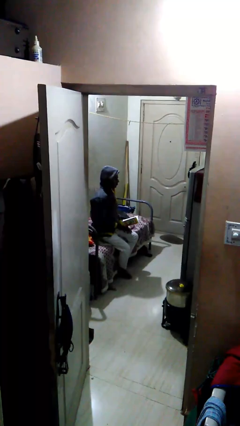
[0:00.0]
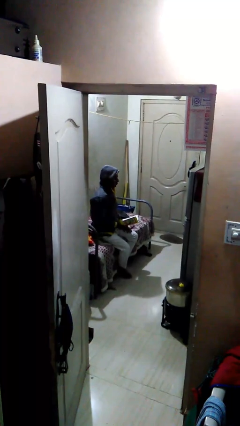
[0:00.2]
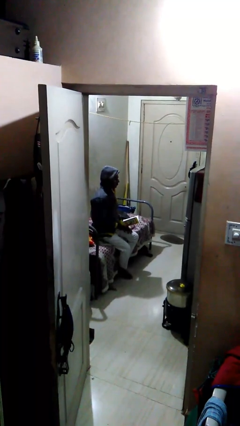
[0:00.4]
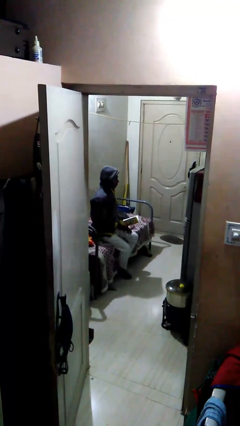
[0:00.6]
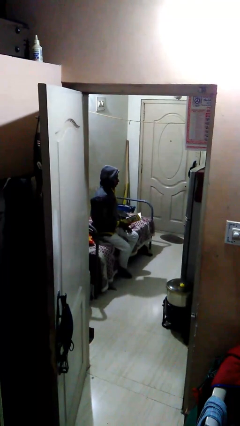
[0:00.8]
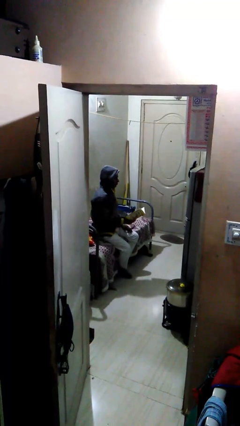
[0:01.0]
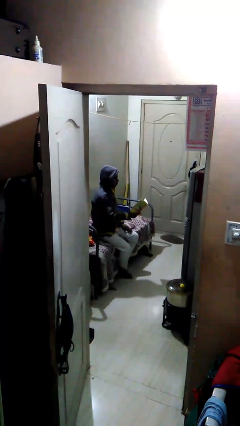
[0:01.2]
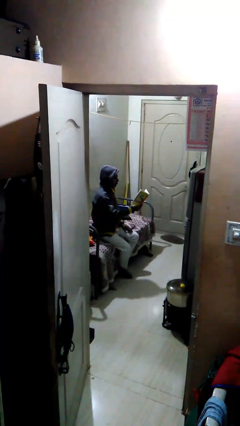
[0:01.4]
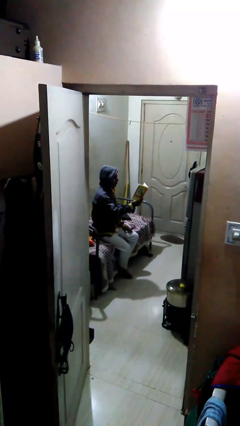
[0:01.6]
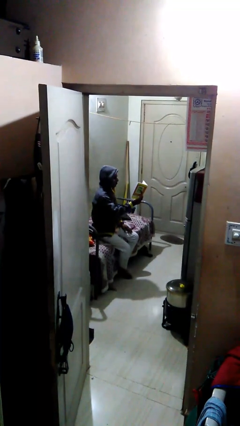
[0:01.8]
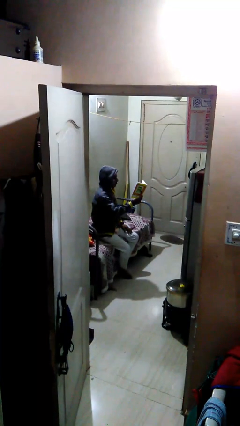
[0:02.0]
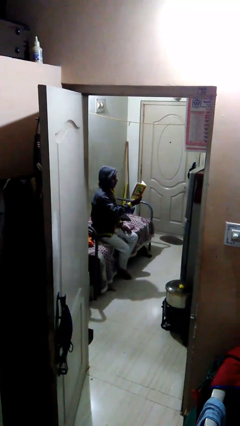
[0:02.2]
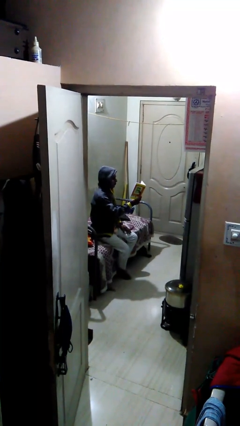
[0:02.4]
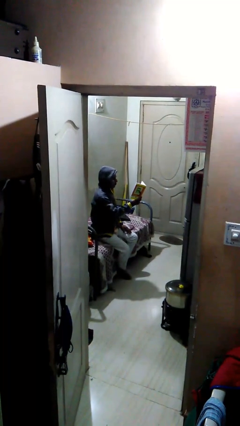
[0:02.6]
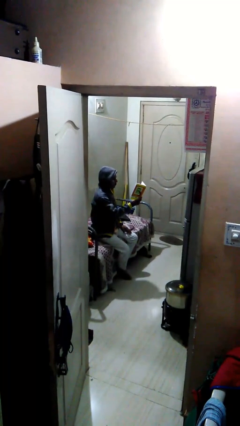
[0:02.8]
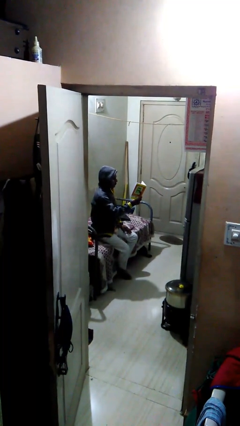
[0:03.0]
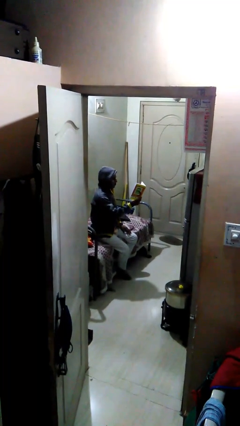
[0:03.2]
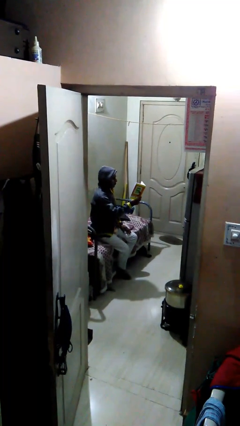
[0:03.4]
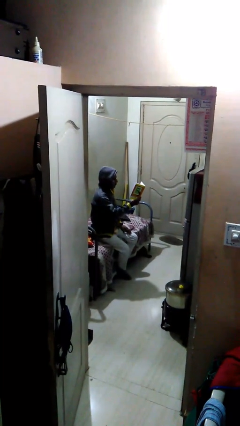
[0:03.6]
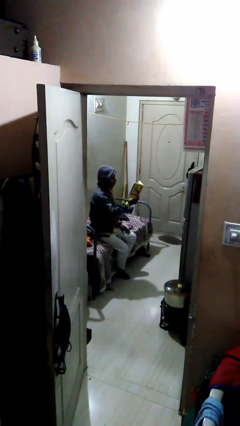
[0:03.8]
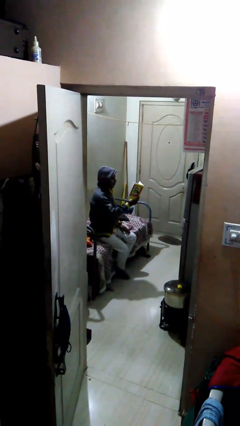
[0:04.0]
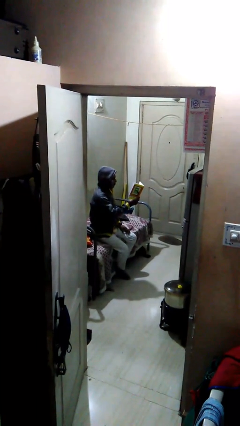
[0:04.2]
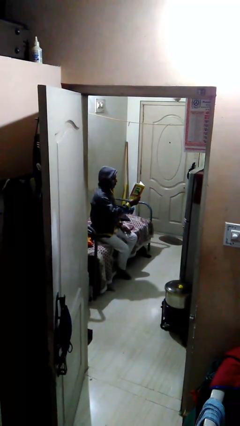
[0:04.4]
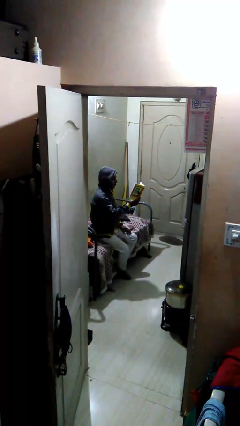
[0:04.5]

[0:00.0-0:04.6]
person reads document

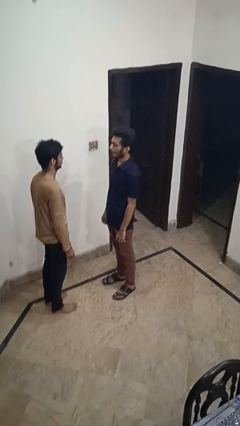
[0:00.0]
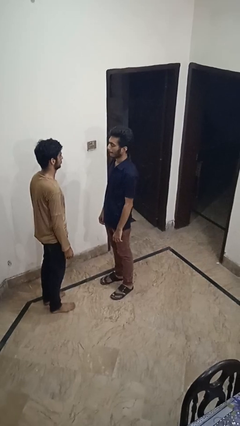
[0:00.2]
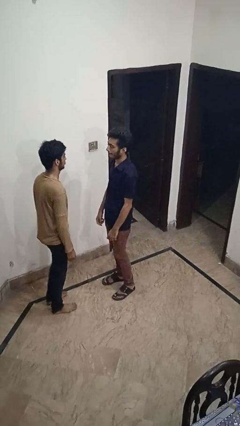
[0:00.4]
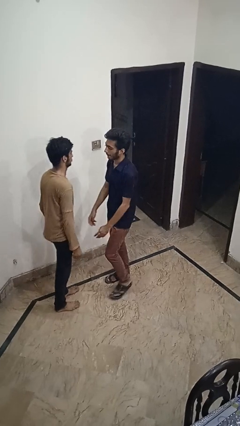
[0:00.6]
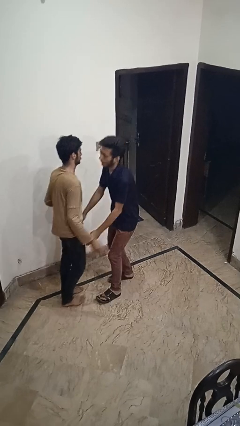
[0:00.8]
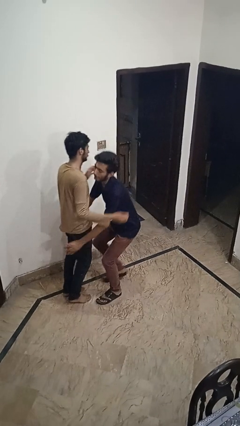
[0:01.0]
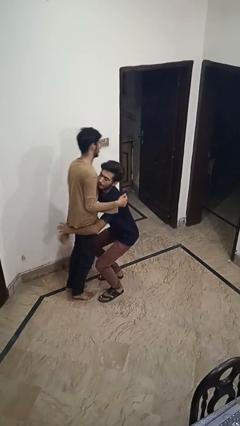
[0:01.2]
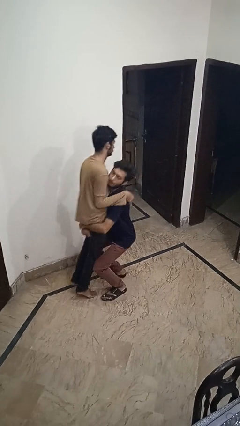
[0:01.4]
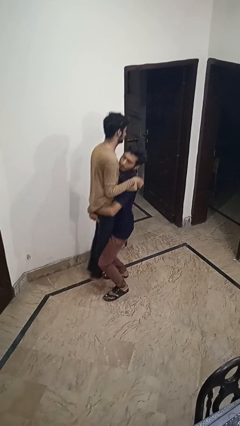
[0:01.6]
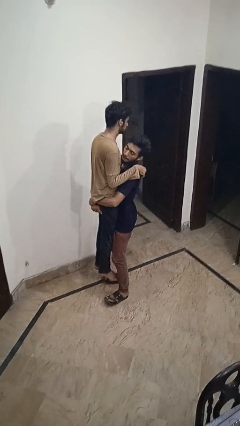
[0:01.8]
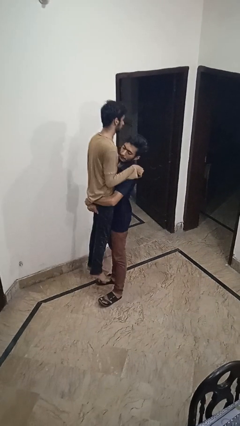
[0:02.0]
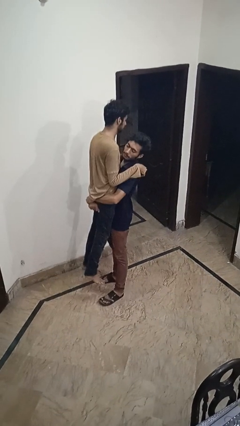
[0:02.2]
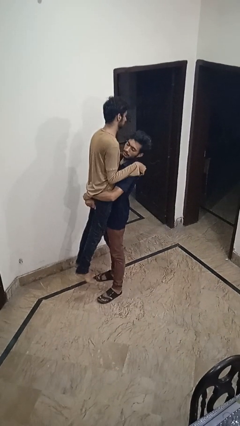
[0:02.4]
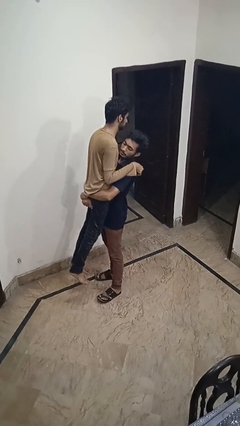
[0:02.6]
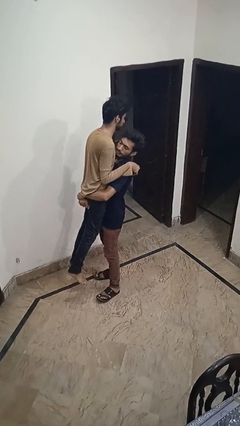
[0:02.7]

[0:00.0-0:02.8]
person picks up person

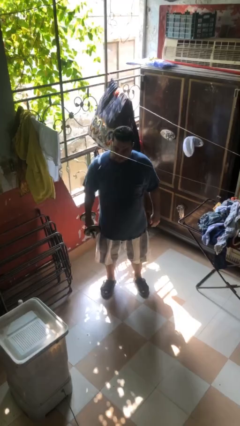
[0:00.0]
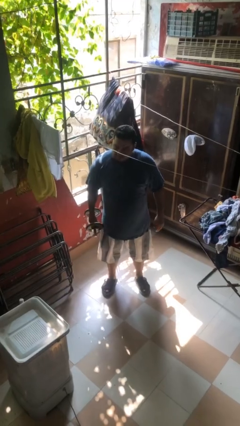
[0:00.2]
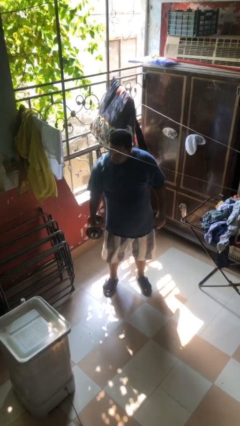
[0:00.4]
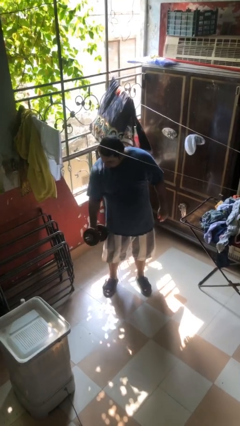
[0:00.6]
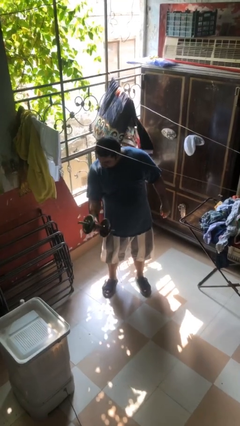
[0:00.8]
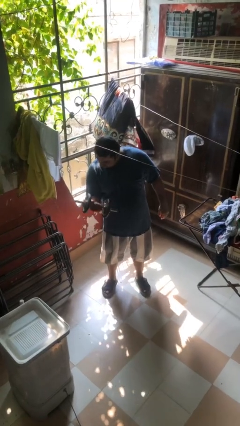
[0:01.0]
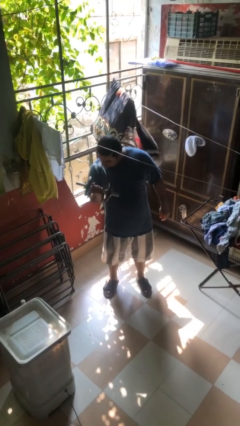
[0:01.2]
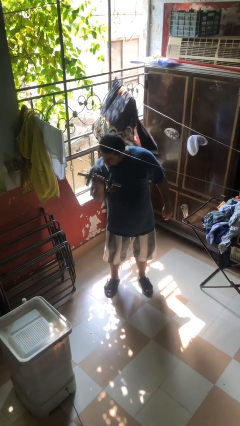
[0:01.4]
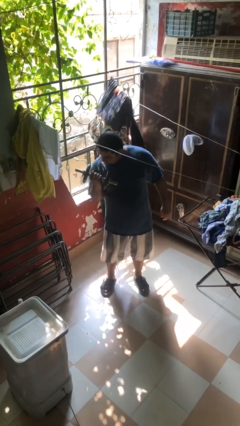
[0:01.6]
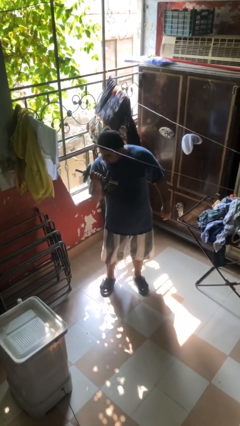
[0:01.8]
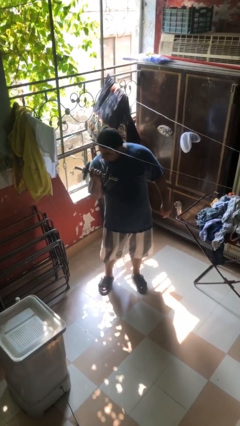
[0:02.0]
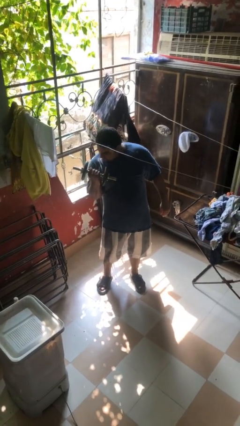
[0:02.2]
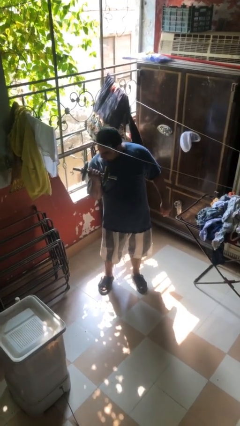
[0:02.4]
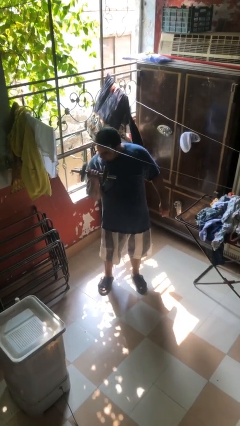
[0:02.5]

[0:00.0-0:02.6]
person lifts dumbbells

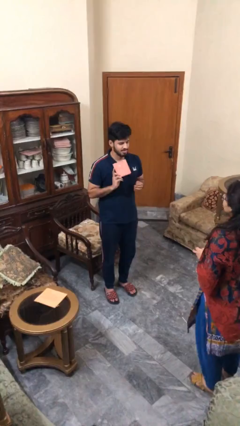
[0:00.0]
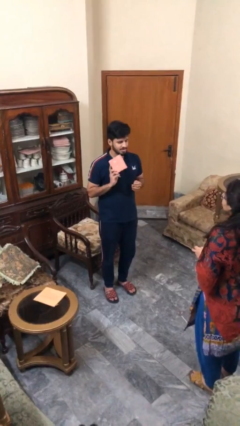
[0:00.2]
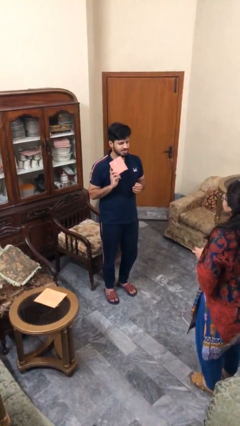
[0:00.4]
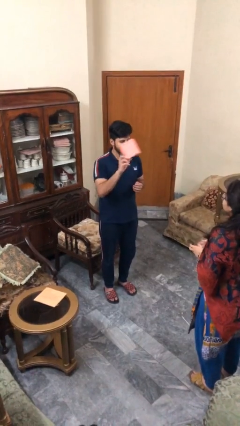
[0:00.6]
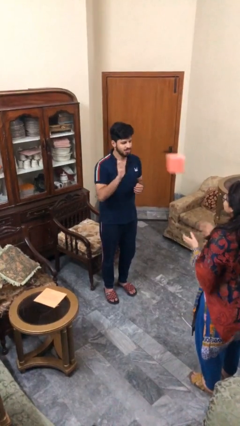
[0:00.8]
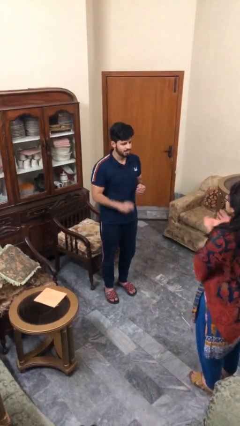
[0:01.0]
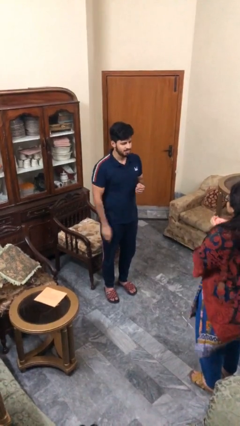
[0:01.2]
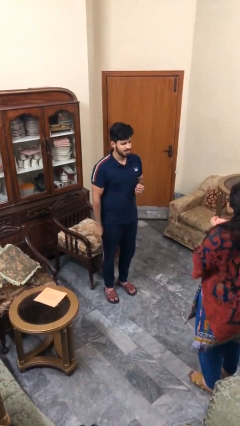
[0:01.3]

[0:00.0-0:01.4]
person throws object to person

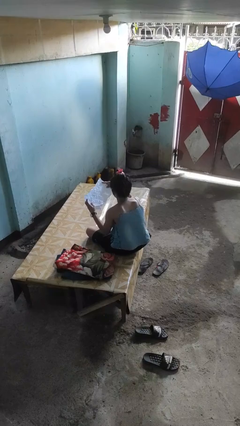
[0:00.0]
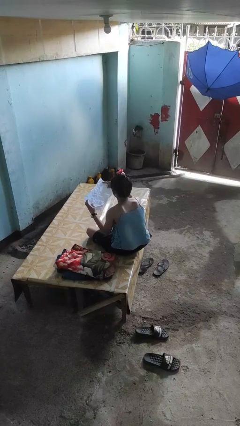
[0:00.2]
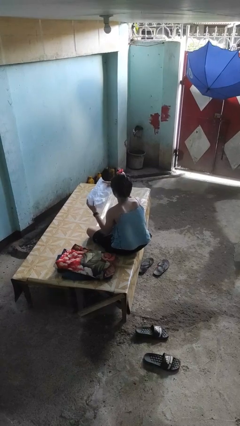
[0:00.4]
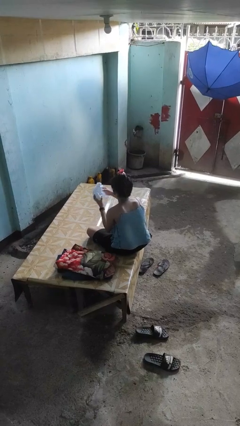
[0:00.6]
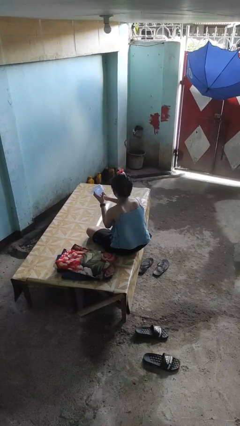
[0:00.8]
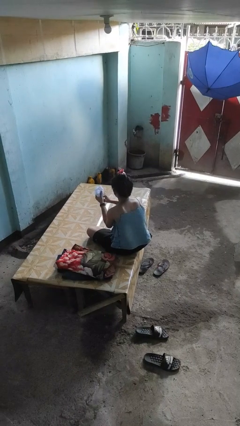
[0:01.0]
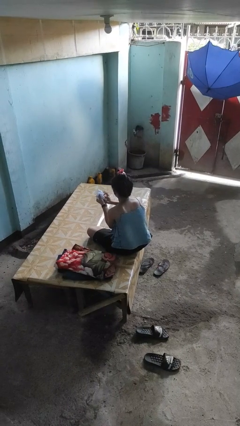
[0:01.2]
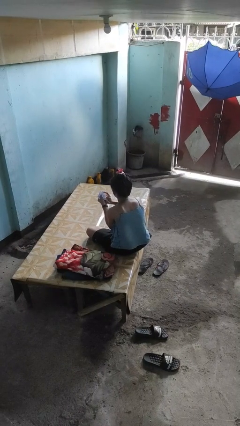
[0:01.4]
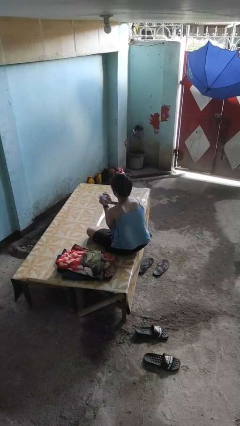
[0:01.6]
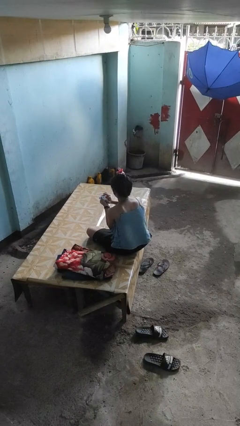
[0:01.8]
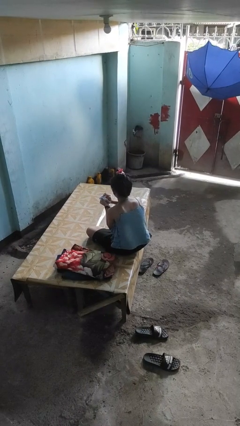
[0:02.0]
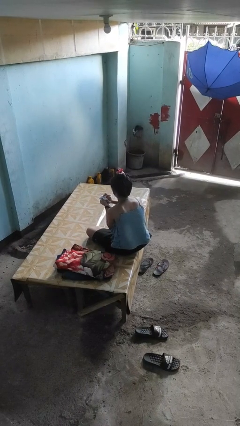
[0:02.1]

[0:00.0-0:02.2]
person crumples paper

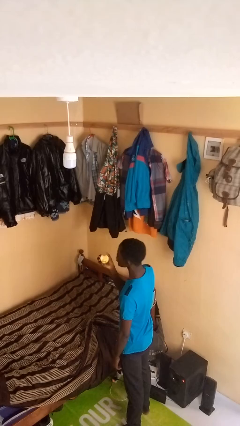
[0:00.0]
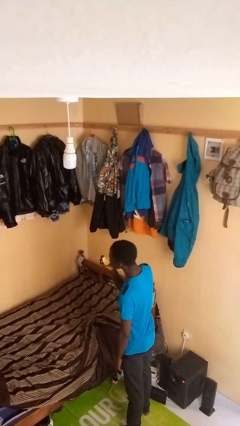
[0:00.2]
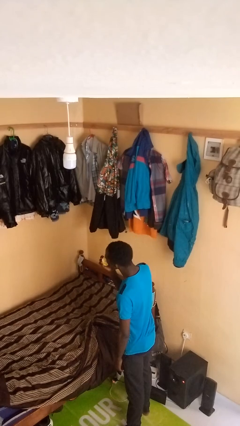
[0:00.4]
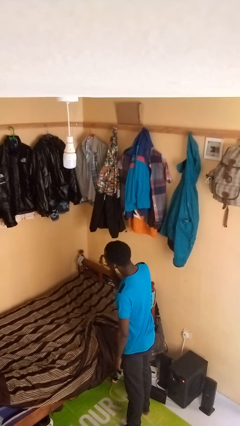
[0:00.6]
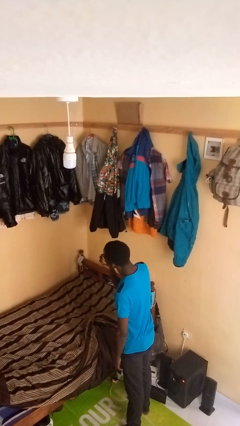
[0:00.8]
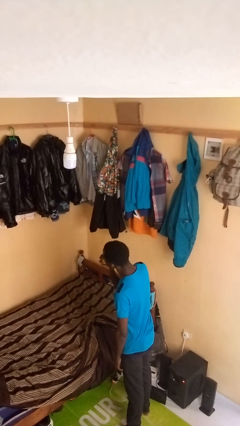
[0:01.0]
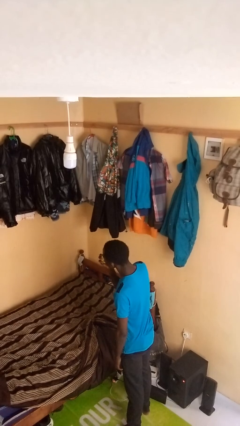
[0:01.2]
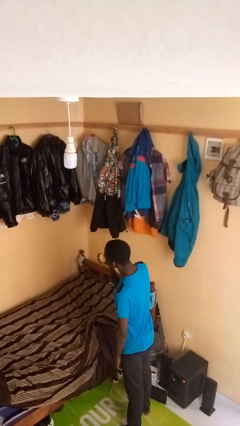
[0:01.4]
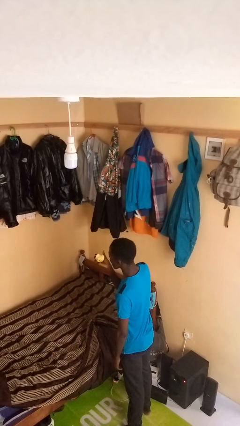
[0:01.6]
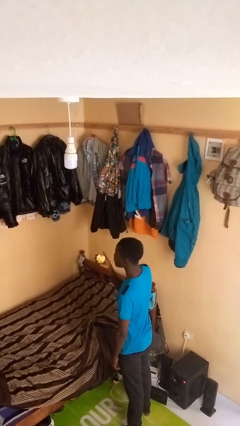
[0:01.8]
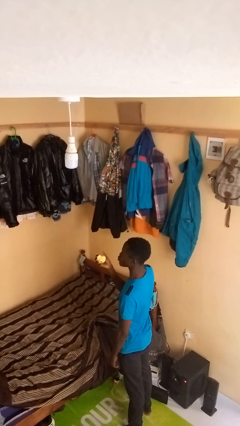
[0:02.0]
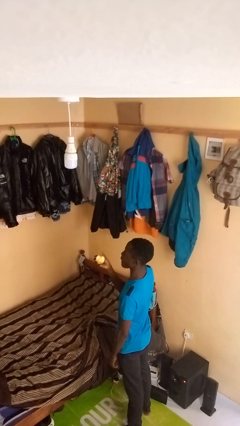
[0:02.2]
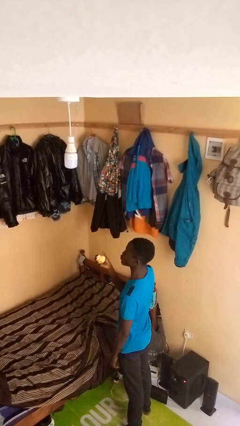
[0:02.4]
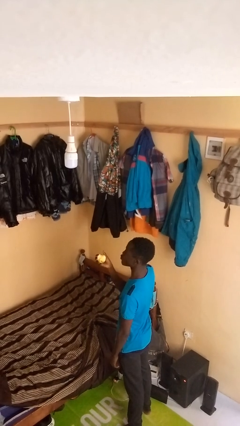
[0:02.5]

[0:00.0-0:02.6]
person eats apple

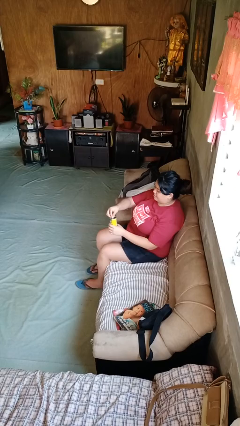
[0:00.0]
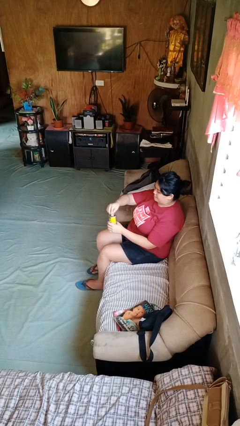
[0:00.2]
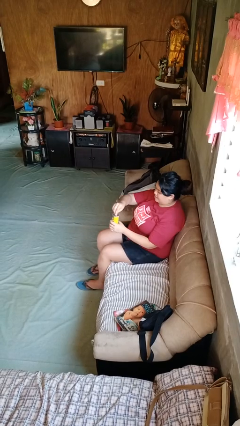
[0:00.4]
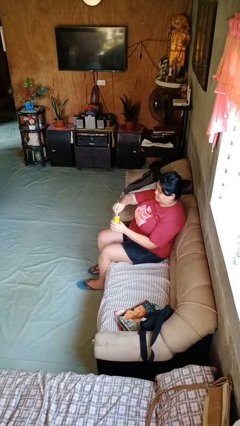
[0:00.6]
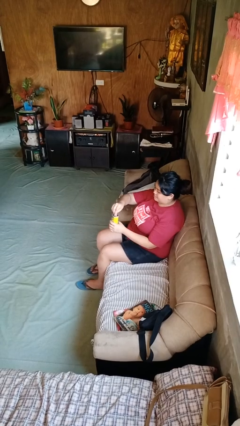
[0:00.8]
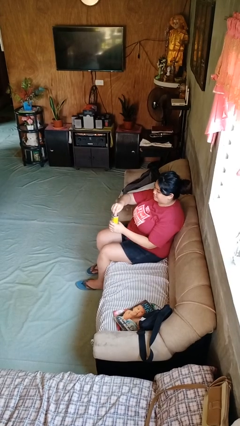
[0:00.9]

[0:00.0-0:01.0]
person opens beverage can
